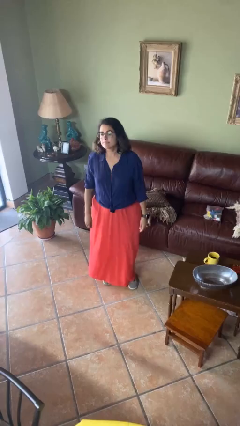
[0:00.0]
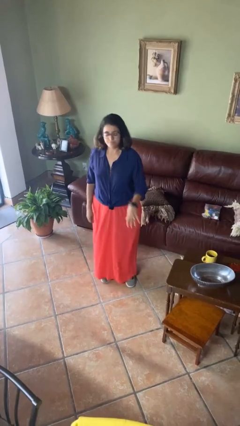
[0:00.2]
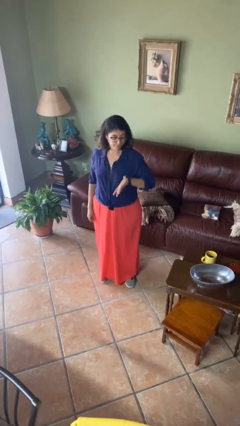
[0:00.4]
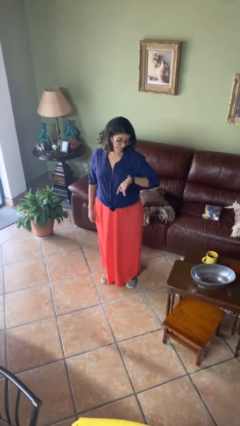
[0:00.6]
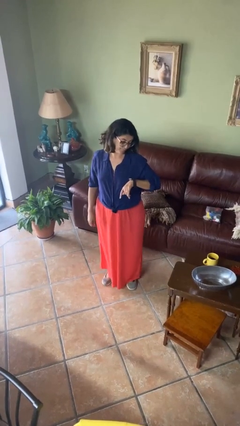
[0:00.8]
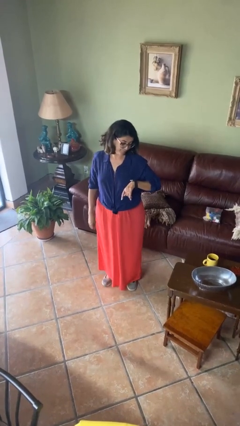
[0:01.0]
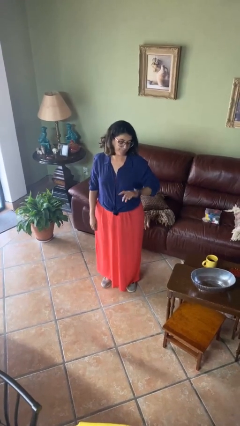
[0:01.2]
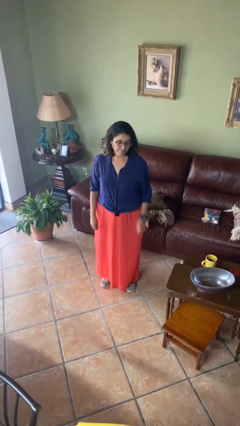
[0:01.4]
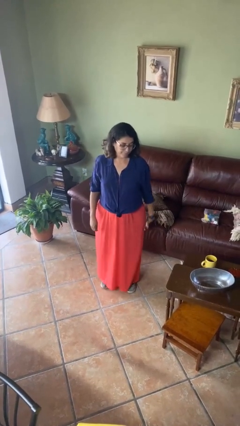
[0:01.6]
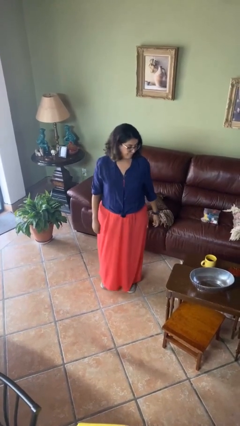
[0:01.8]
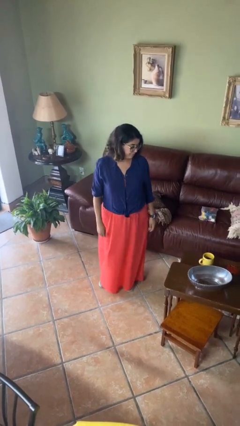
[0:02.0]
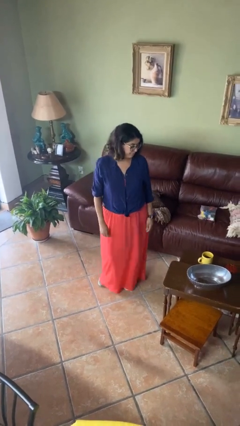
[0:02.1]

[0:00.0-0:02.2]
person looks at wristwatch

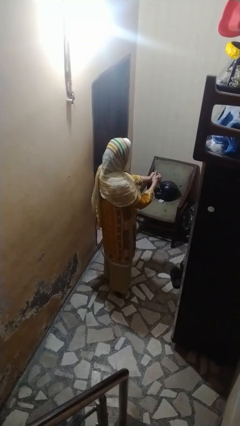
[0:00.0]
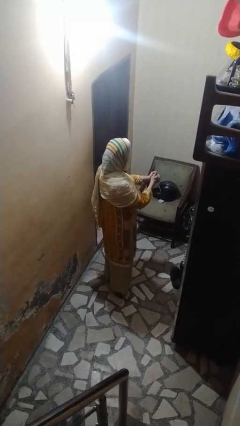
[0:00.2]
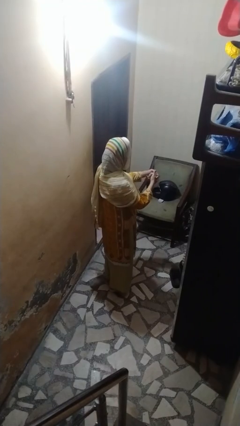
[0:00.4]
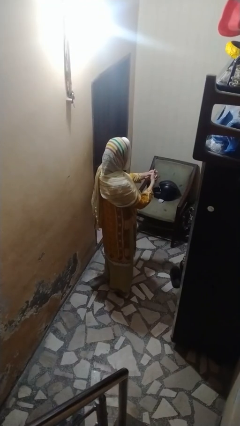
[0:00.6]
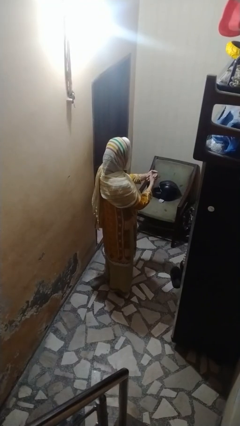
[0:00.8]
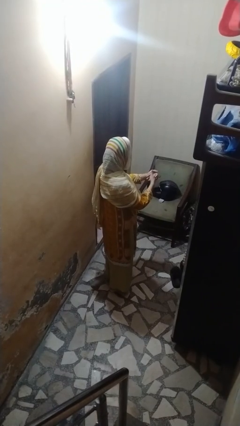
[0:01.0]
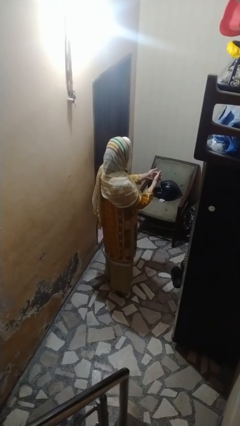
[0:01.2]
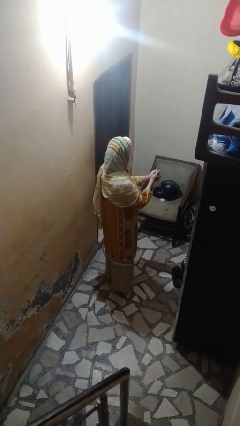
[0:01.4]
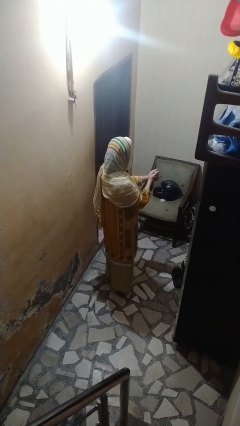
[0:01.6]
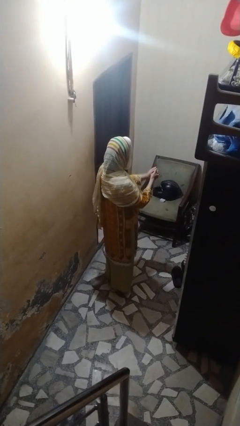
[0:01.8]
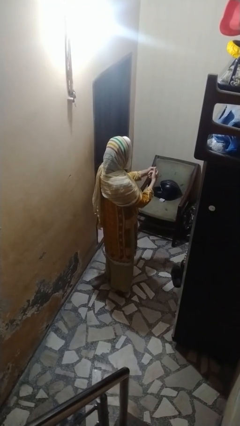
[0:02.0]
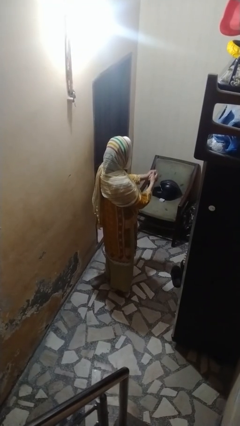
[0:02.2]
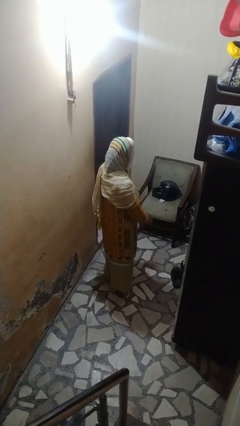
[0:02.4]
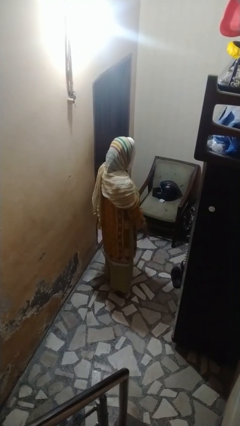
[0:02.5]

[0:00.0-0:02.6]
person cracks knuckles

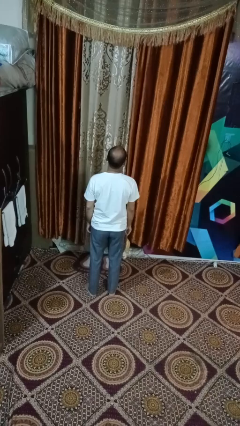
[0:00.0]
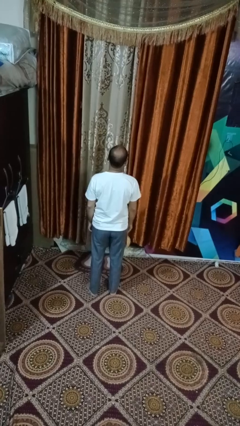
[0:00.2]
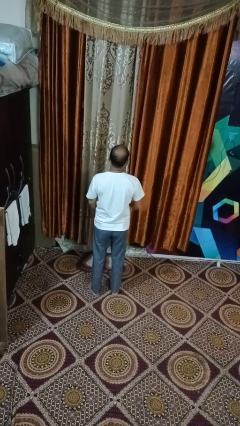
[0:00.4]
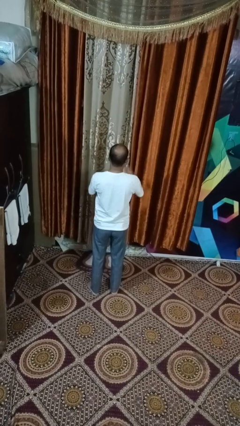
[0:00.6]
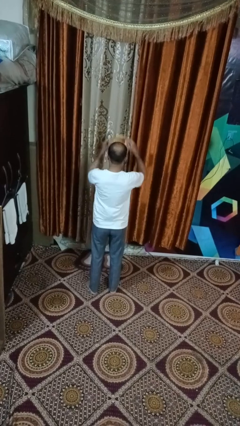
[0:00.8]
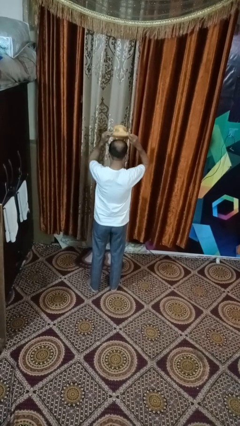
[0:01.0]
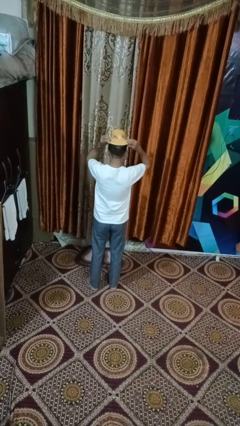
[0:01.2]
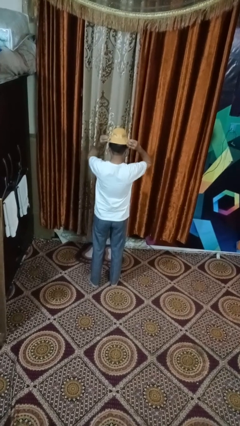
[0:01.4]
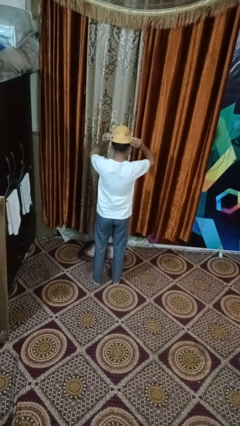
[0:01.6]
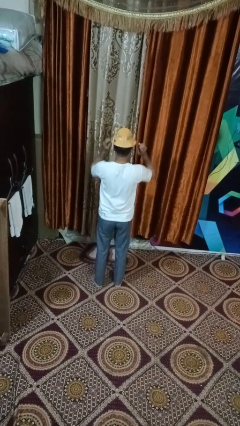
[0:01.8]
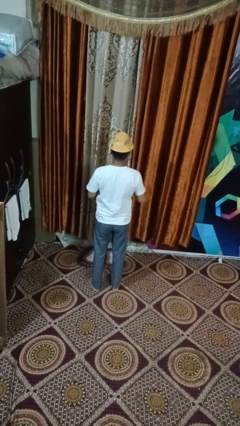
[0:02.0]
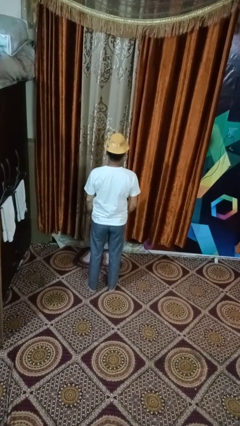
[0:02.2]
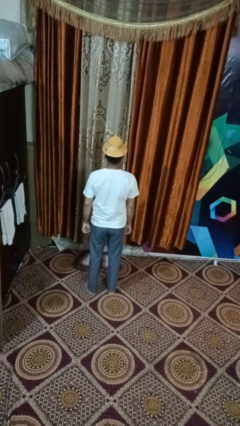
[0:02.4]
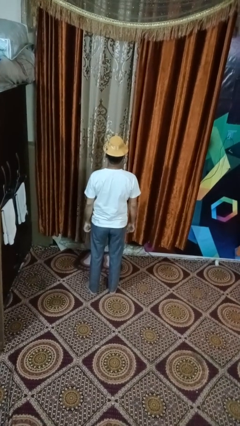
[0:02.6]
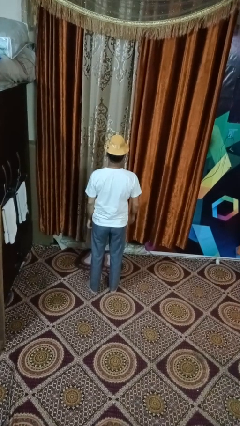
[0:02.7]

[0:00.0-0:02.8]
person puts on hat

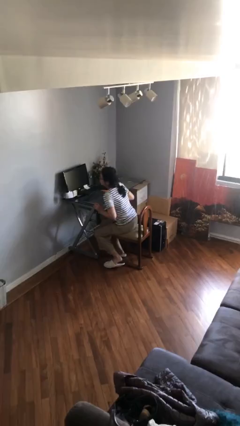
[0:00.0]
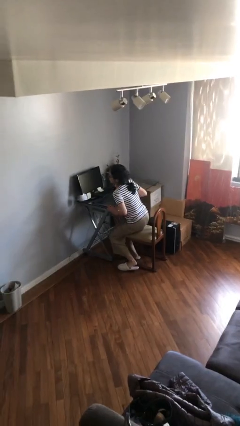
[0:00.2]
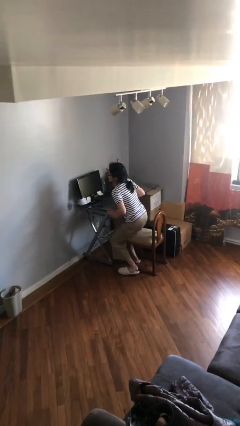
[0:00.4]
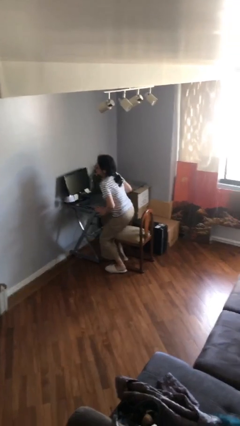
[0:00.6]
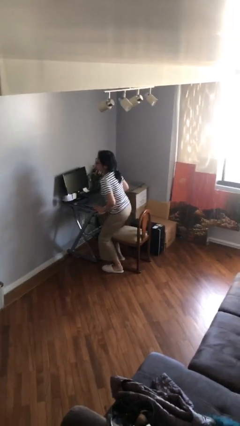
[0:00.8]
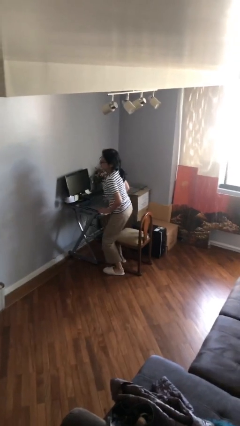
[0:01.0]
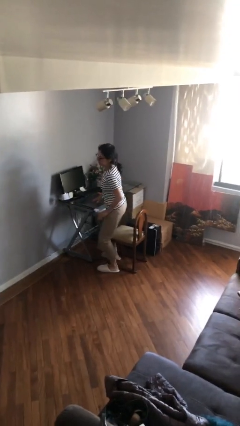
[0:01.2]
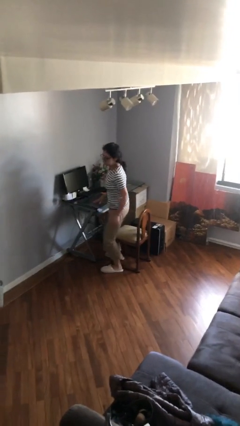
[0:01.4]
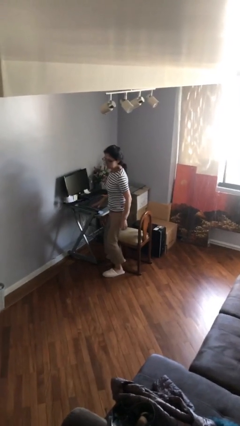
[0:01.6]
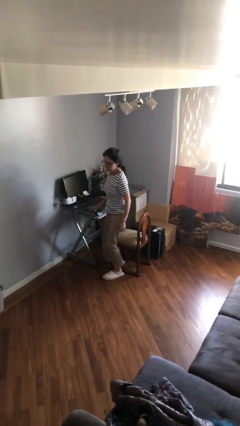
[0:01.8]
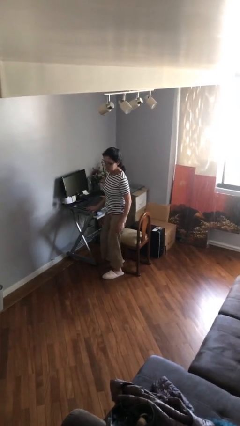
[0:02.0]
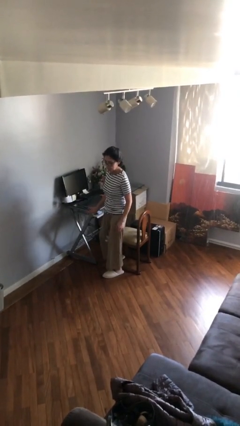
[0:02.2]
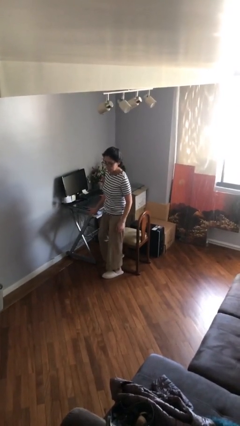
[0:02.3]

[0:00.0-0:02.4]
person stands up

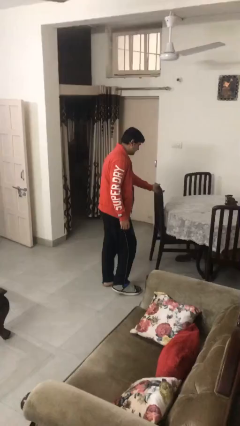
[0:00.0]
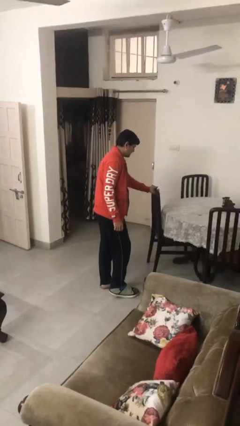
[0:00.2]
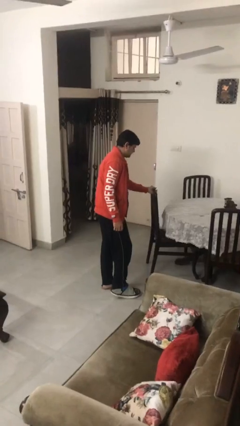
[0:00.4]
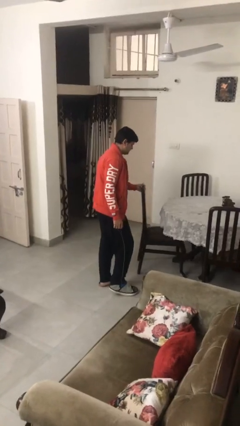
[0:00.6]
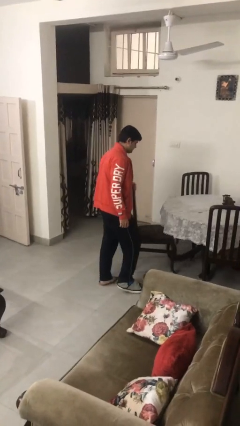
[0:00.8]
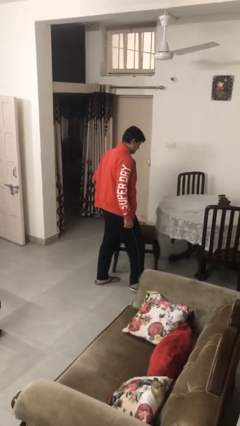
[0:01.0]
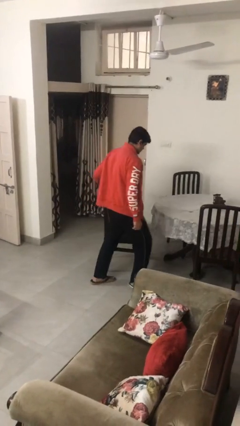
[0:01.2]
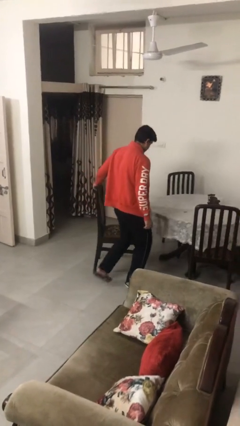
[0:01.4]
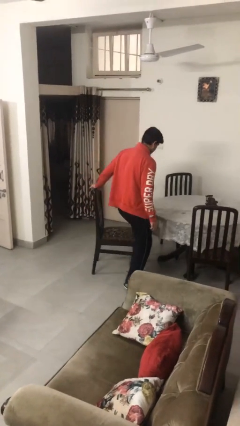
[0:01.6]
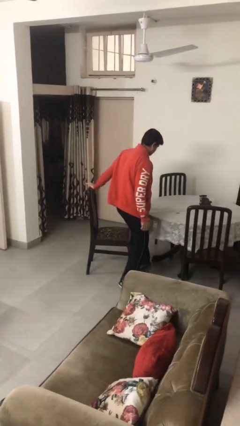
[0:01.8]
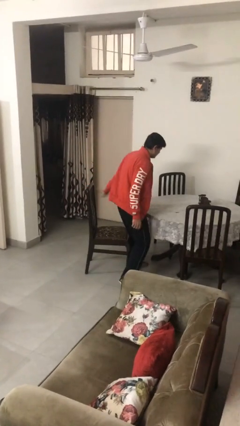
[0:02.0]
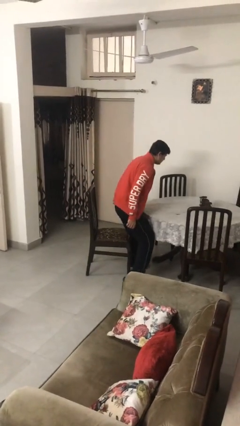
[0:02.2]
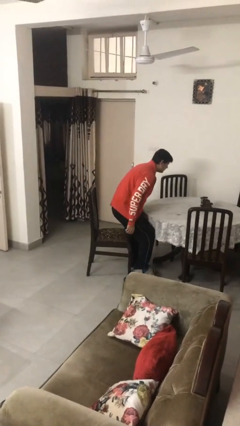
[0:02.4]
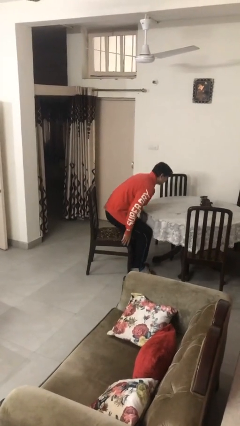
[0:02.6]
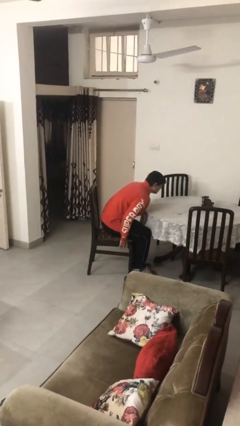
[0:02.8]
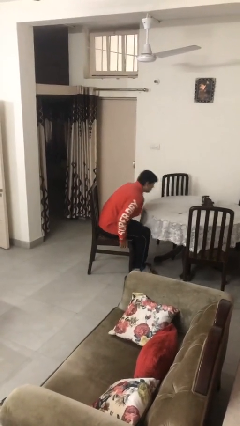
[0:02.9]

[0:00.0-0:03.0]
person sits down

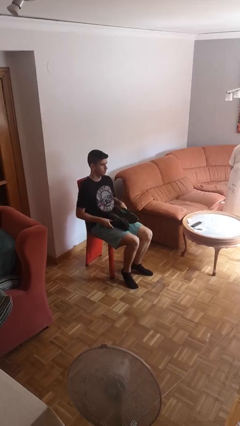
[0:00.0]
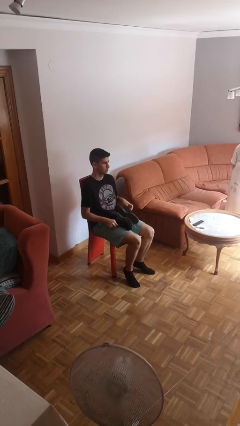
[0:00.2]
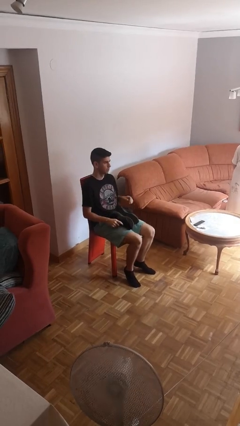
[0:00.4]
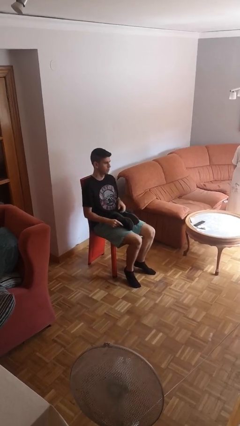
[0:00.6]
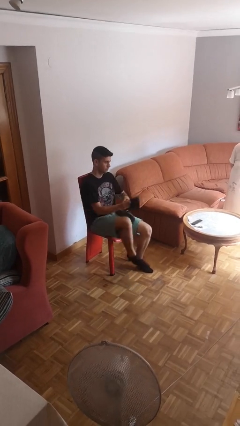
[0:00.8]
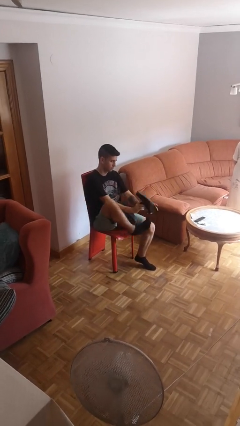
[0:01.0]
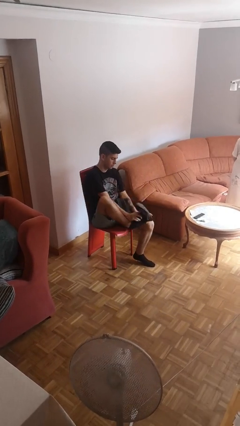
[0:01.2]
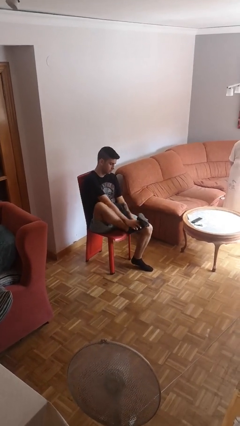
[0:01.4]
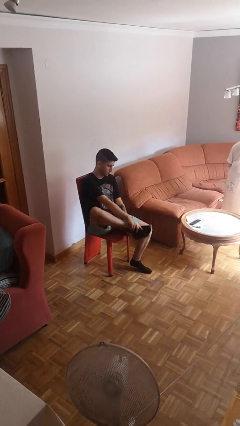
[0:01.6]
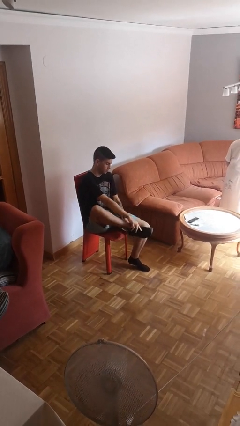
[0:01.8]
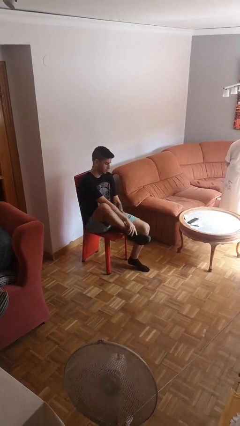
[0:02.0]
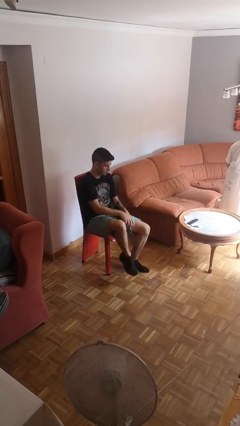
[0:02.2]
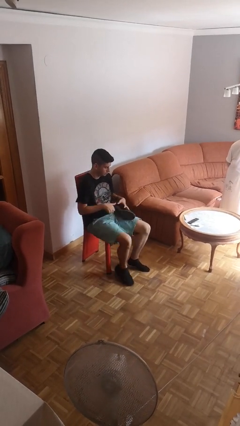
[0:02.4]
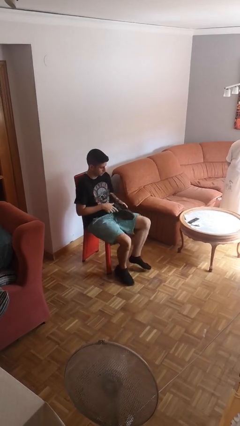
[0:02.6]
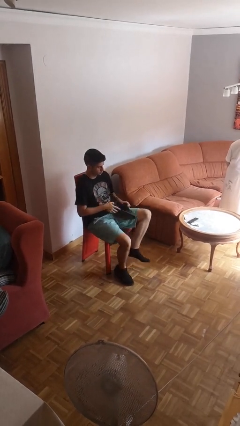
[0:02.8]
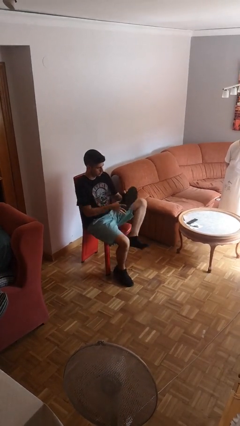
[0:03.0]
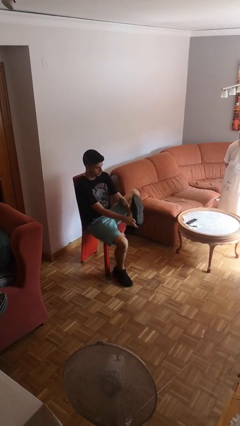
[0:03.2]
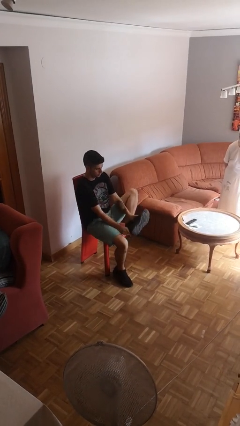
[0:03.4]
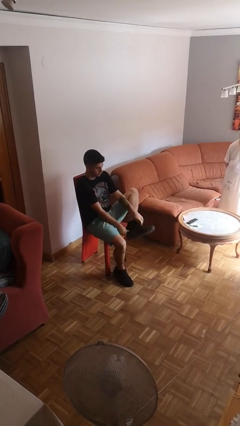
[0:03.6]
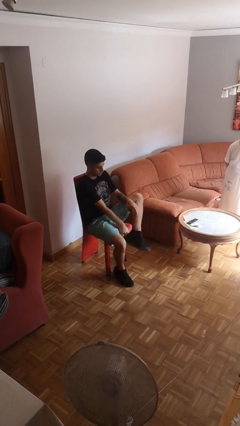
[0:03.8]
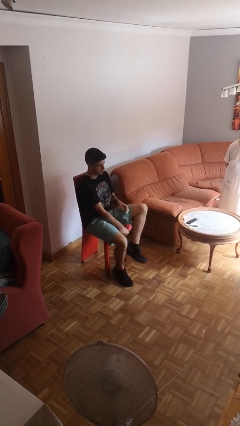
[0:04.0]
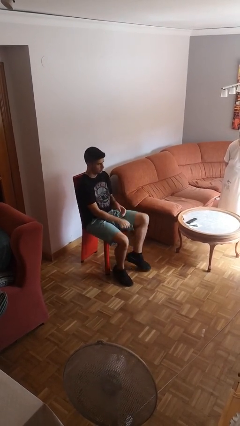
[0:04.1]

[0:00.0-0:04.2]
person puts on shoes
